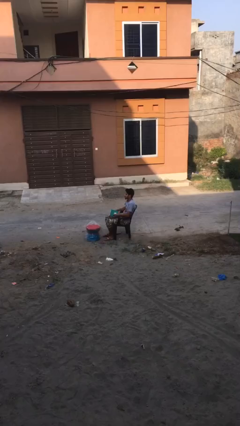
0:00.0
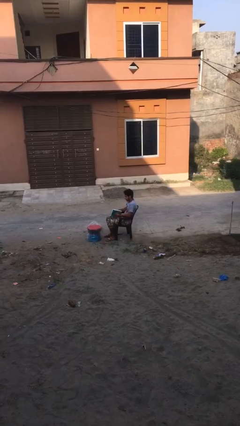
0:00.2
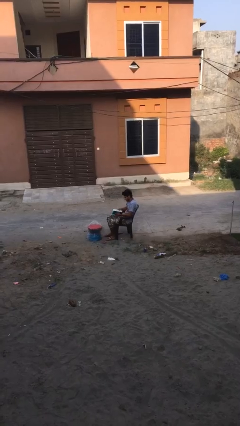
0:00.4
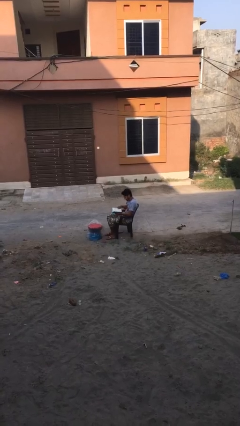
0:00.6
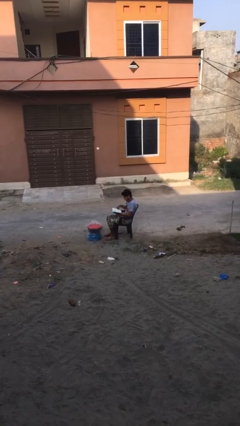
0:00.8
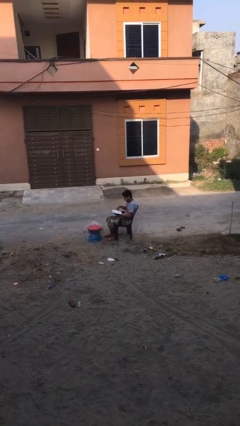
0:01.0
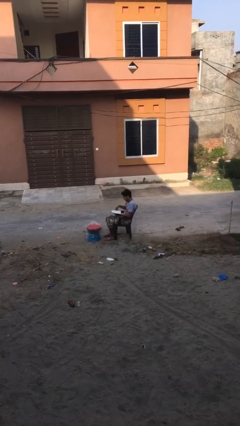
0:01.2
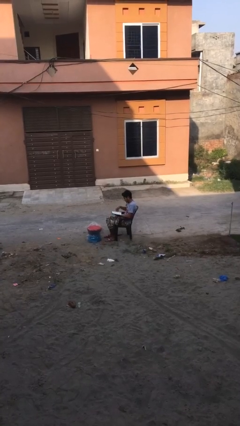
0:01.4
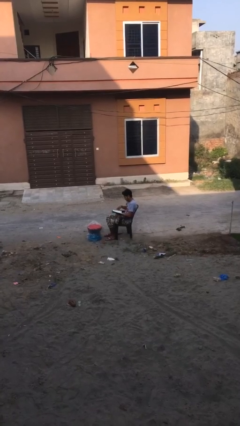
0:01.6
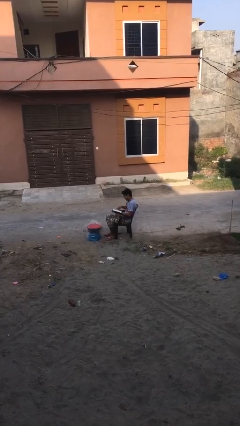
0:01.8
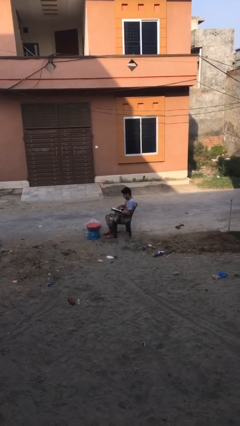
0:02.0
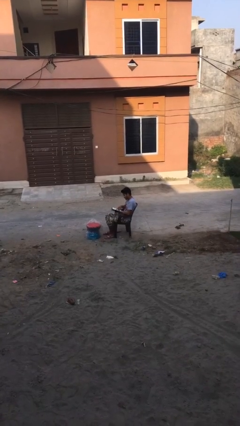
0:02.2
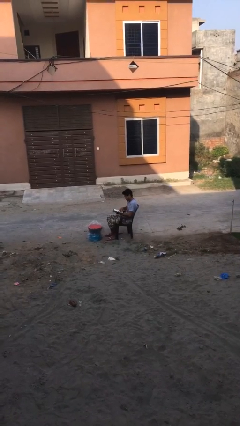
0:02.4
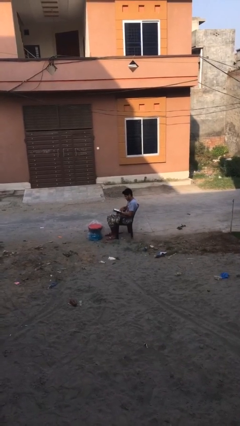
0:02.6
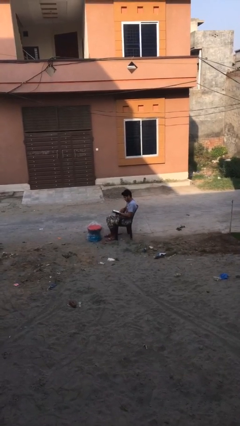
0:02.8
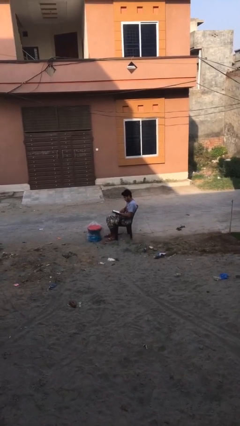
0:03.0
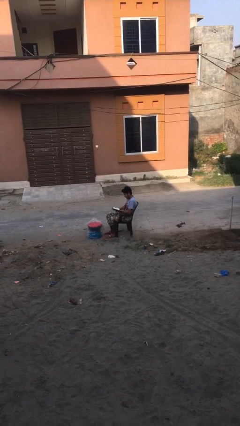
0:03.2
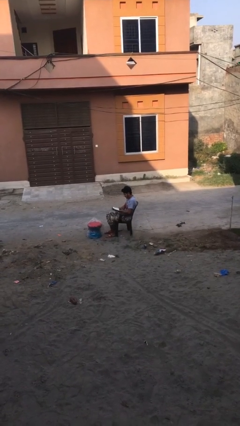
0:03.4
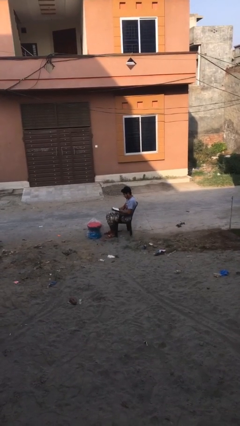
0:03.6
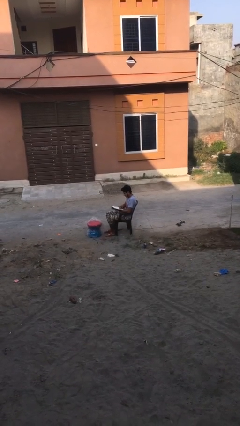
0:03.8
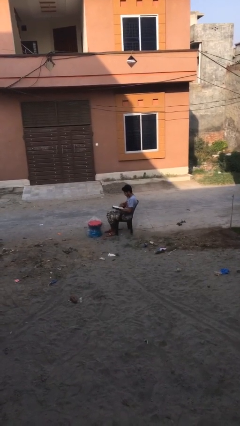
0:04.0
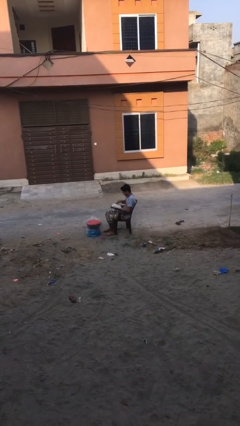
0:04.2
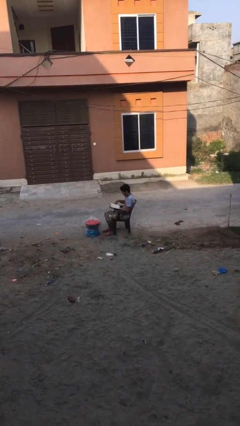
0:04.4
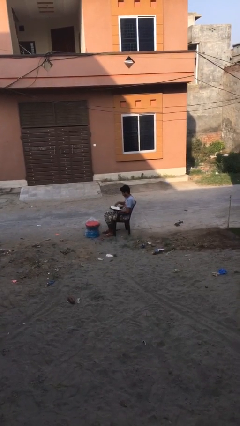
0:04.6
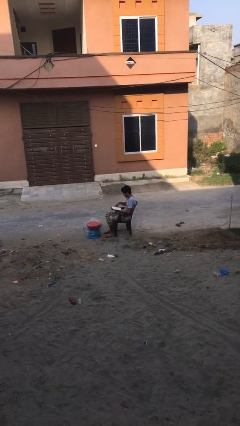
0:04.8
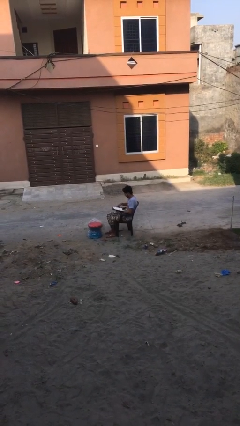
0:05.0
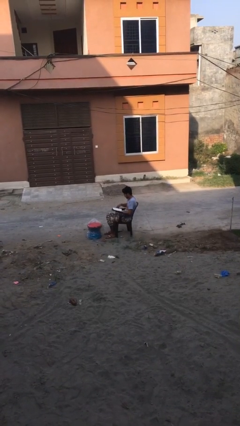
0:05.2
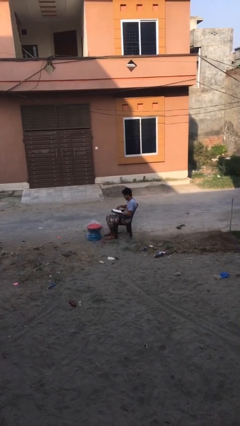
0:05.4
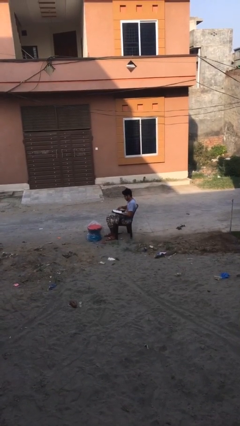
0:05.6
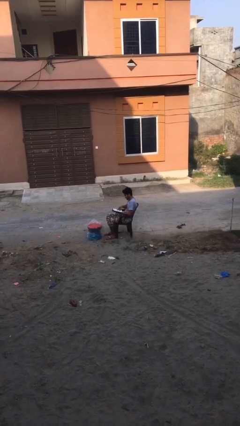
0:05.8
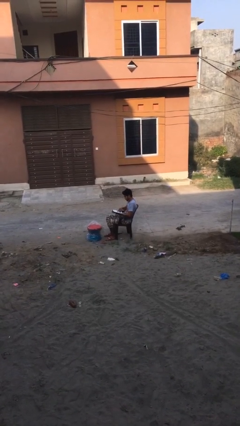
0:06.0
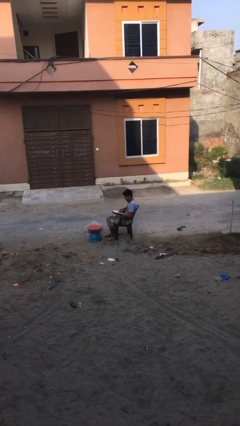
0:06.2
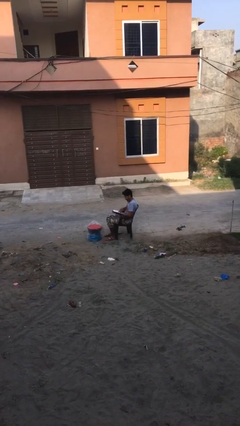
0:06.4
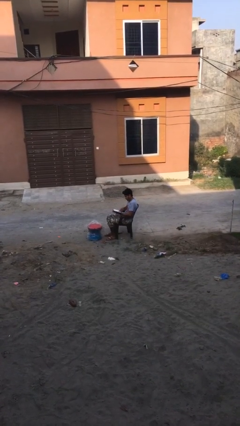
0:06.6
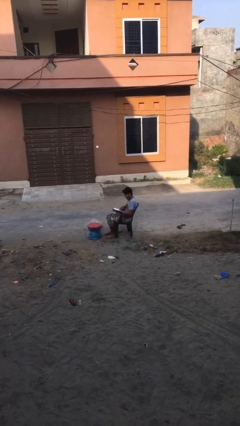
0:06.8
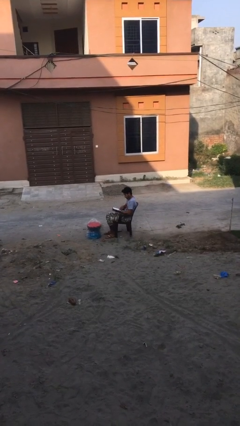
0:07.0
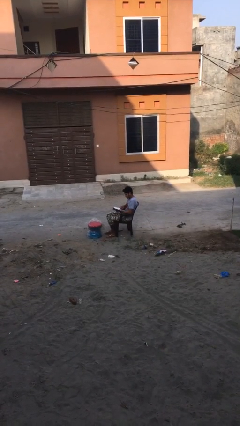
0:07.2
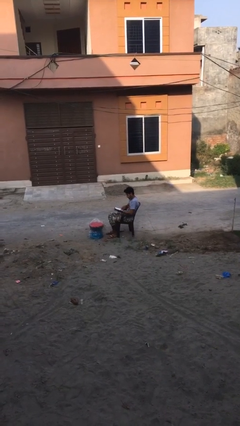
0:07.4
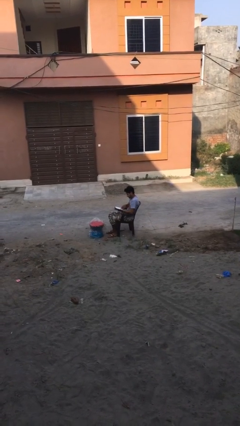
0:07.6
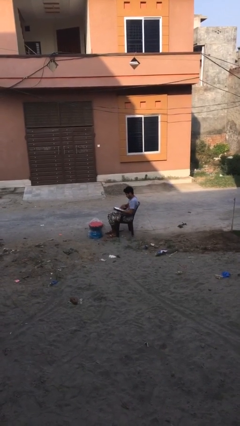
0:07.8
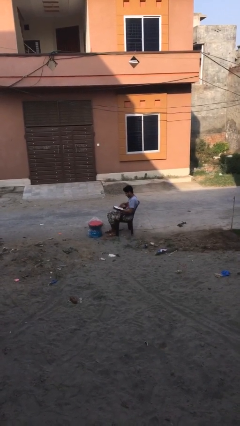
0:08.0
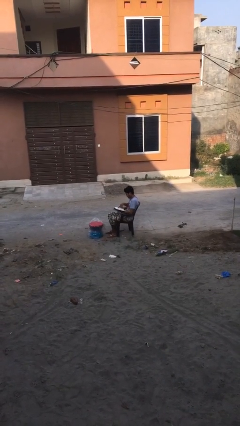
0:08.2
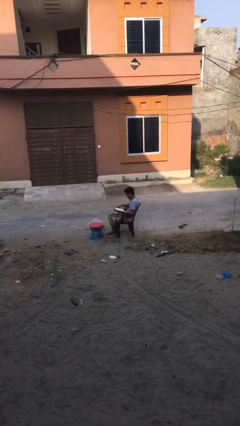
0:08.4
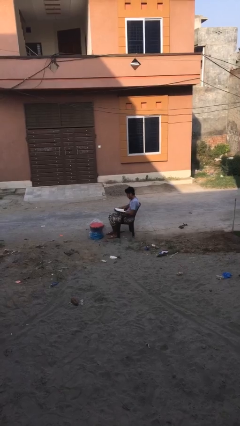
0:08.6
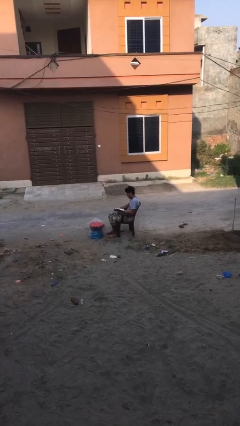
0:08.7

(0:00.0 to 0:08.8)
person reads document

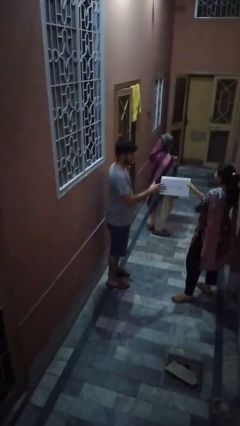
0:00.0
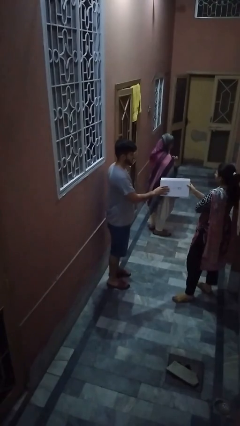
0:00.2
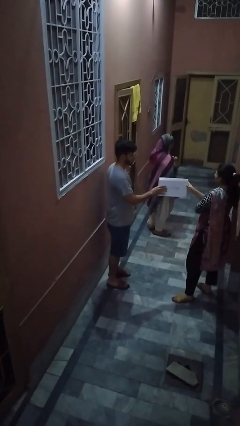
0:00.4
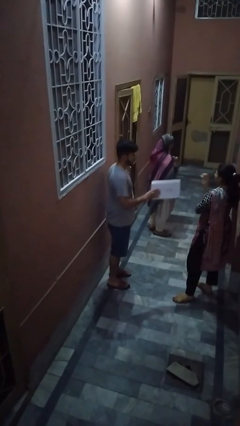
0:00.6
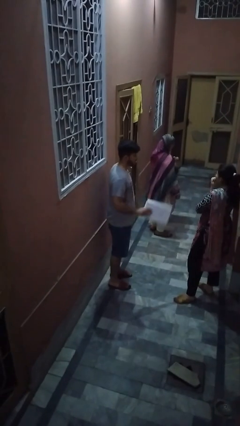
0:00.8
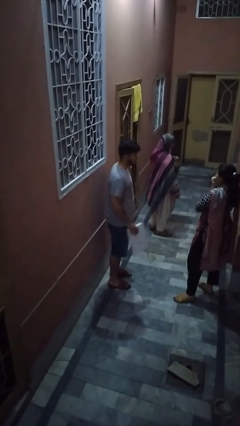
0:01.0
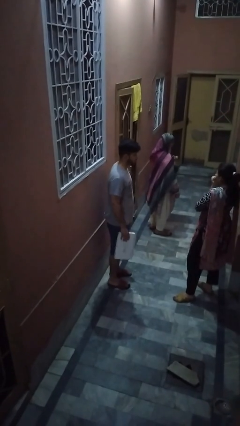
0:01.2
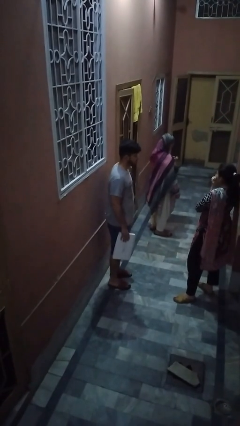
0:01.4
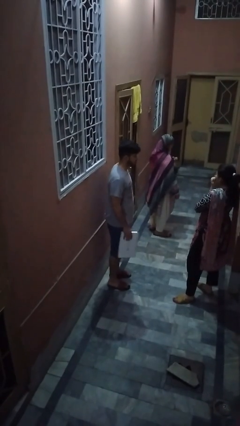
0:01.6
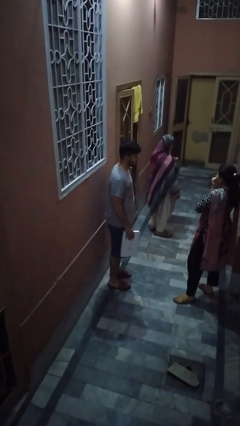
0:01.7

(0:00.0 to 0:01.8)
person transfers object to person

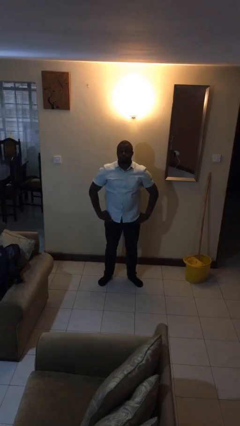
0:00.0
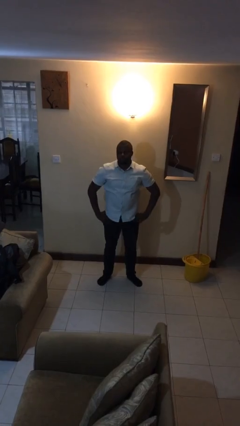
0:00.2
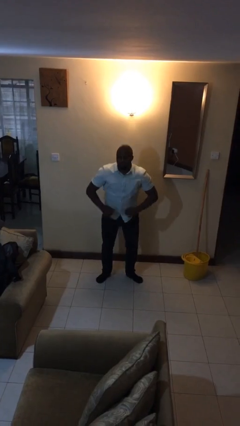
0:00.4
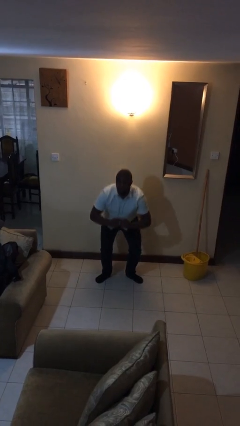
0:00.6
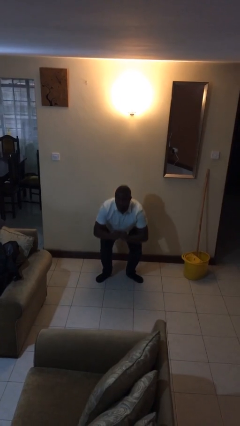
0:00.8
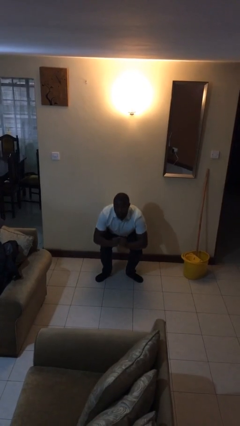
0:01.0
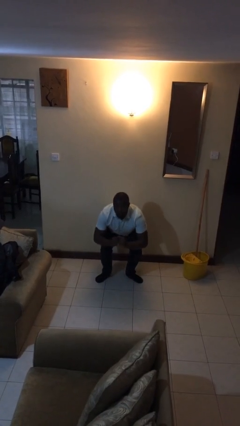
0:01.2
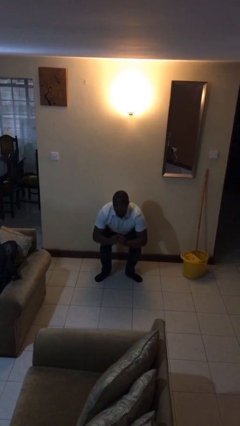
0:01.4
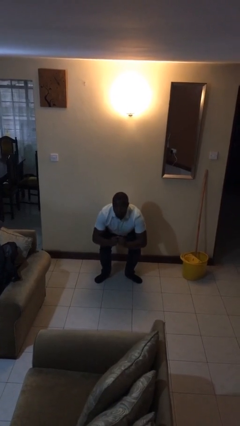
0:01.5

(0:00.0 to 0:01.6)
person squats

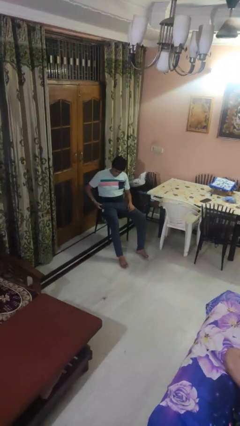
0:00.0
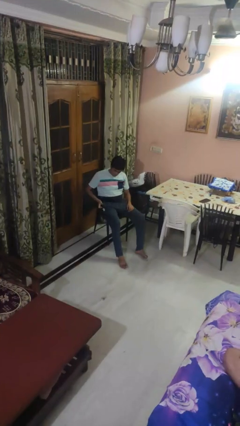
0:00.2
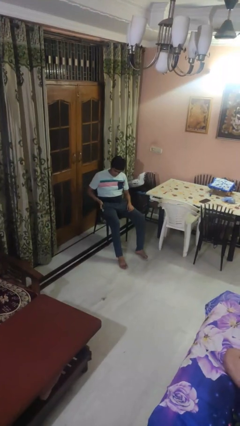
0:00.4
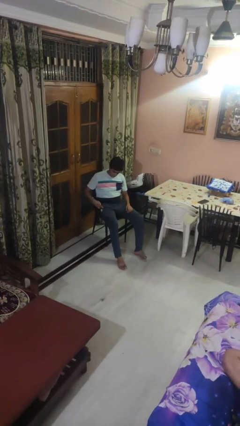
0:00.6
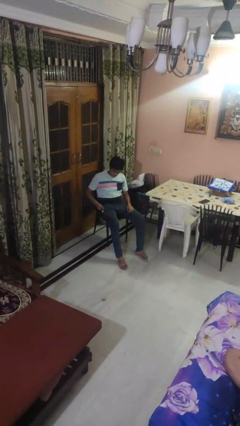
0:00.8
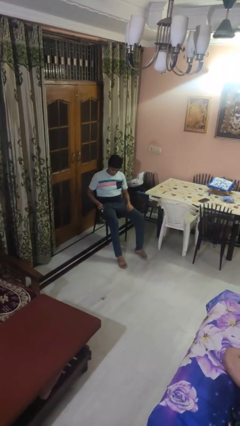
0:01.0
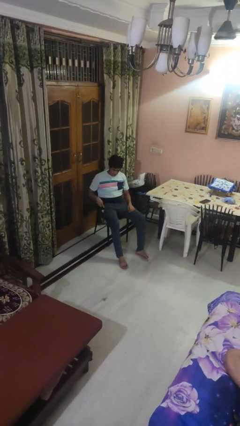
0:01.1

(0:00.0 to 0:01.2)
person puts phone into pocket

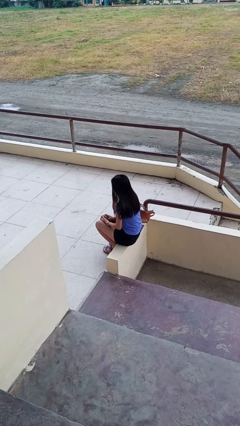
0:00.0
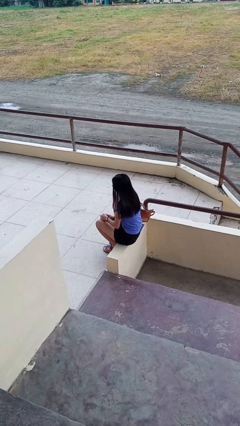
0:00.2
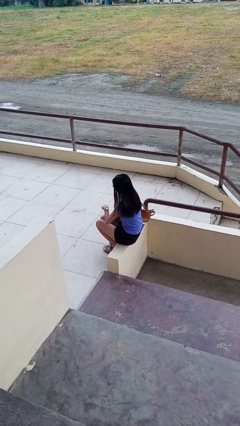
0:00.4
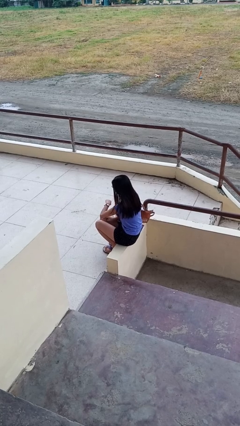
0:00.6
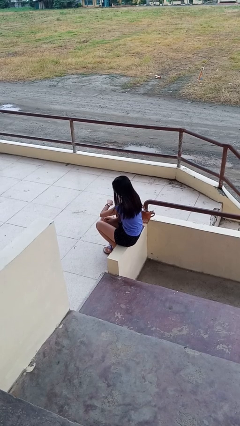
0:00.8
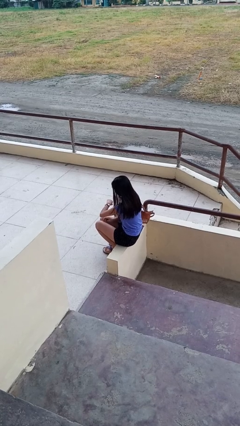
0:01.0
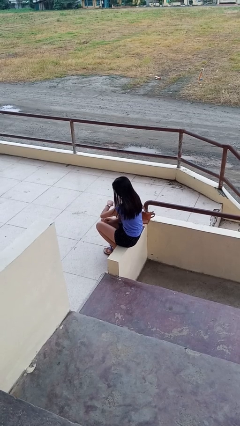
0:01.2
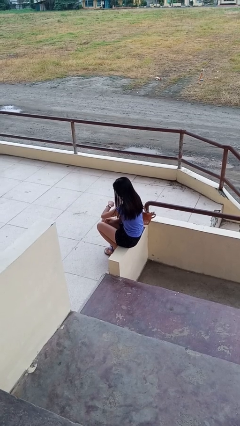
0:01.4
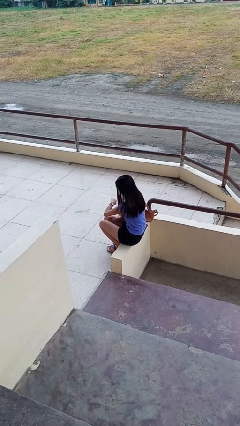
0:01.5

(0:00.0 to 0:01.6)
person looks at wristwatch

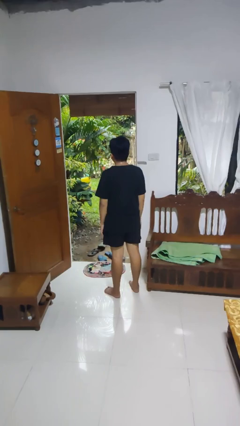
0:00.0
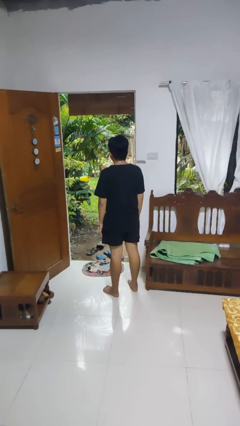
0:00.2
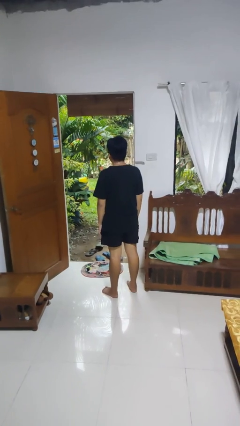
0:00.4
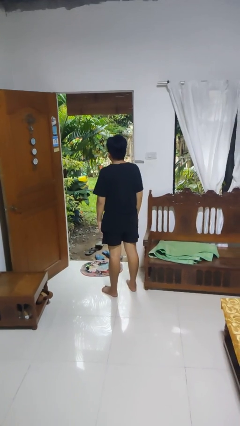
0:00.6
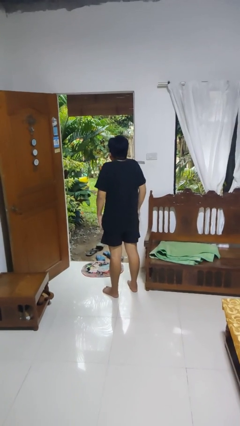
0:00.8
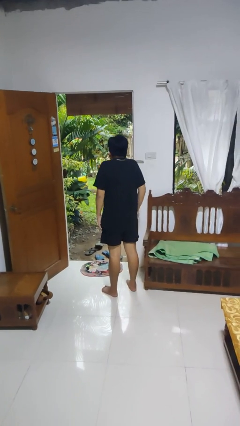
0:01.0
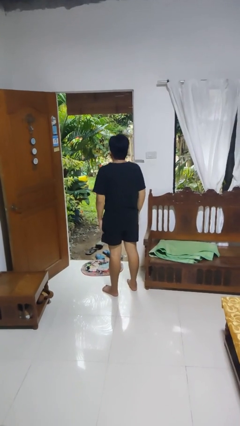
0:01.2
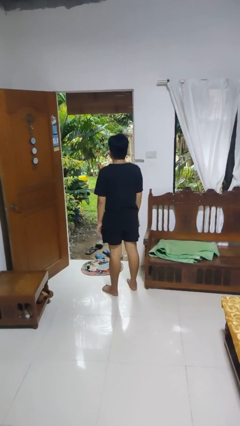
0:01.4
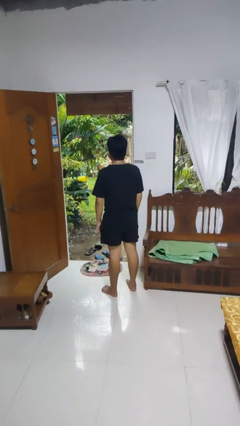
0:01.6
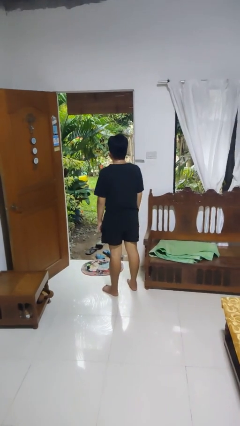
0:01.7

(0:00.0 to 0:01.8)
person shrugs

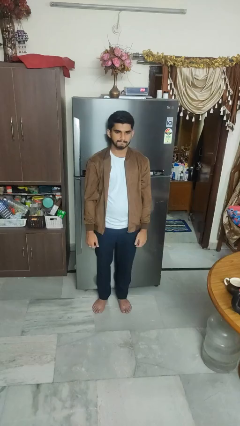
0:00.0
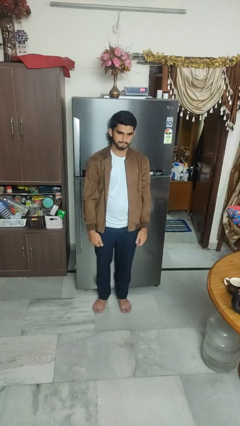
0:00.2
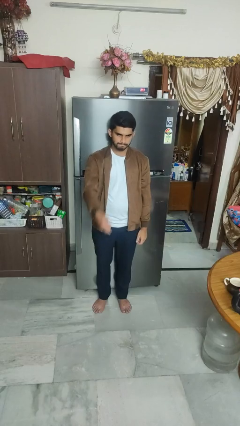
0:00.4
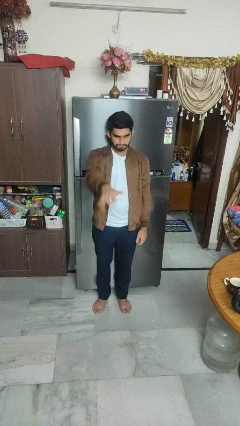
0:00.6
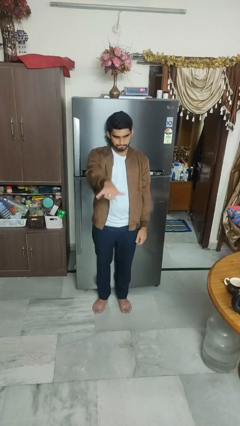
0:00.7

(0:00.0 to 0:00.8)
person gestures hang loose
